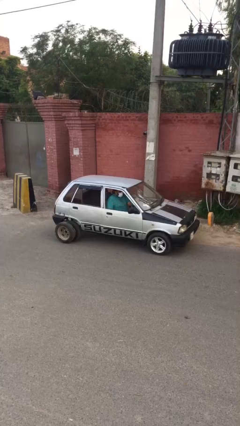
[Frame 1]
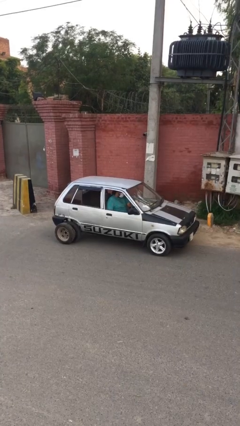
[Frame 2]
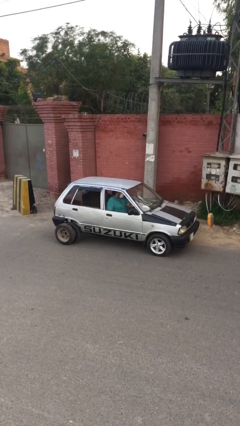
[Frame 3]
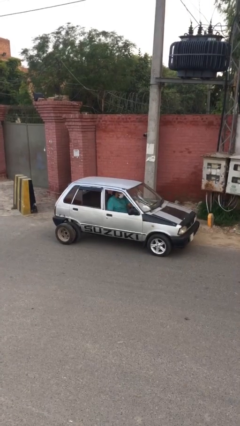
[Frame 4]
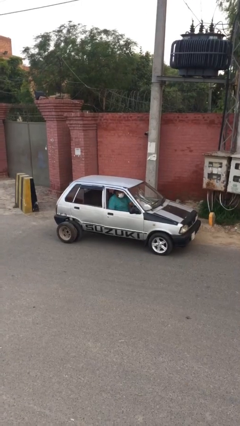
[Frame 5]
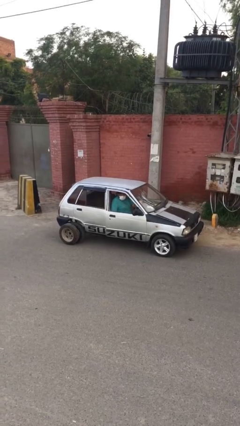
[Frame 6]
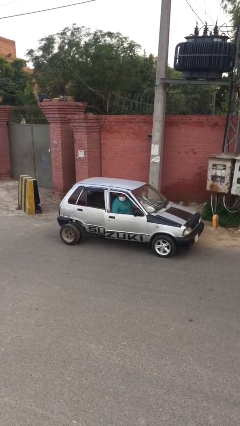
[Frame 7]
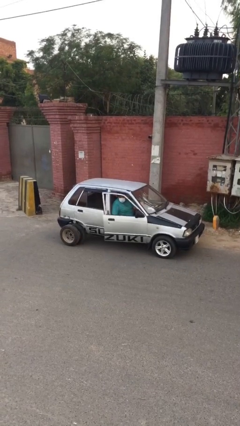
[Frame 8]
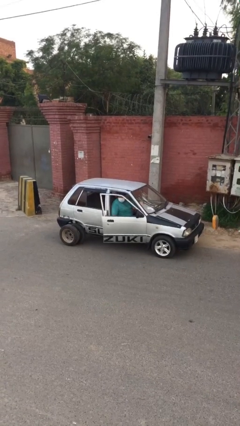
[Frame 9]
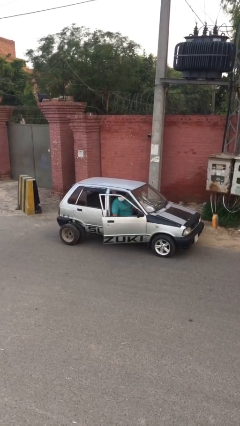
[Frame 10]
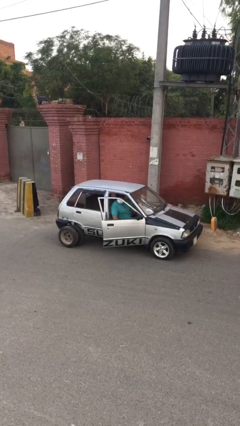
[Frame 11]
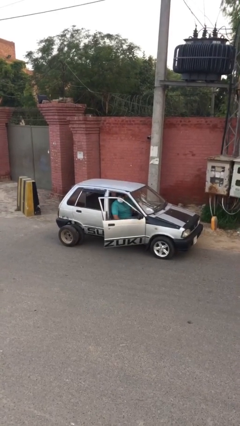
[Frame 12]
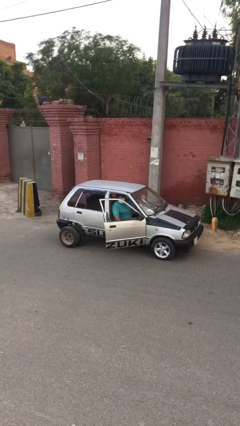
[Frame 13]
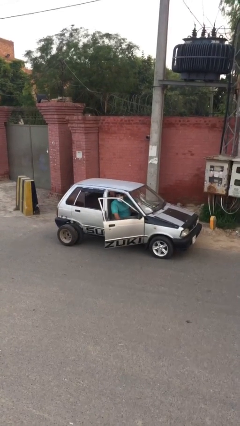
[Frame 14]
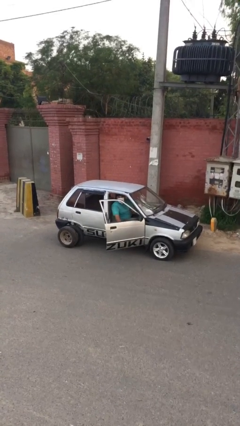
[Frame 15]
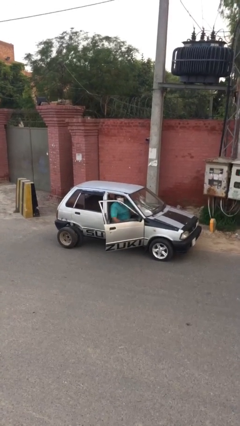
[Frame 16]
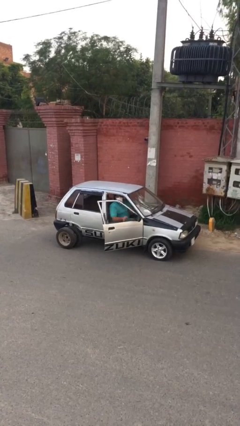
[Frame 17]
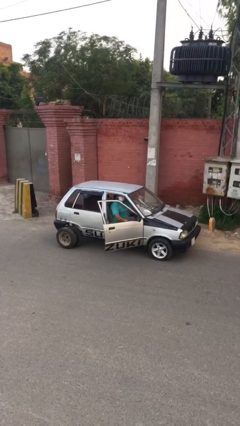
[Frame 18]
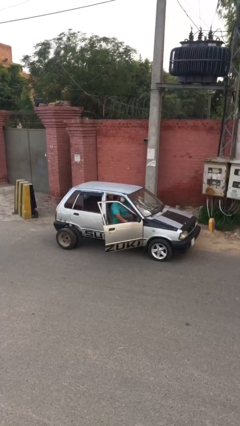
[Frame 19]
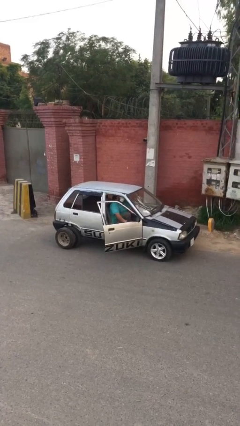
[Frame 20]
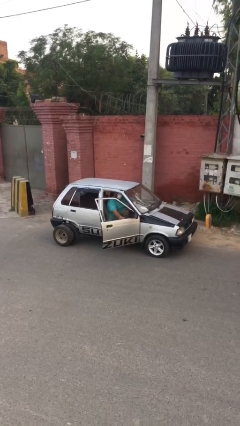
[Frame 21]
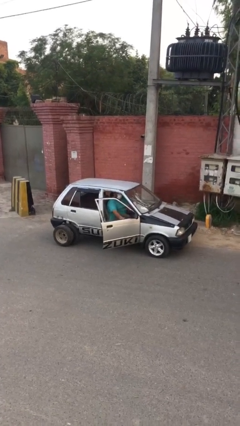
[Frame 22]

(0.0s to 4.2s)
person opens car door

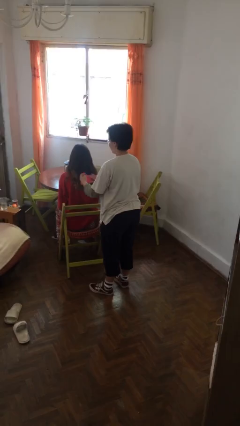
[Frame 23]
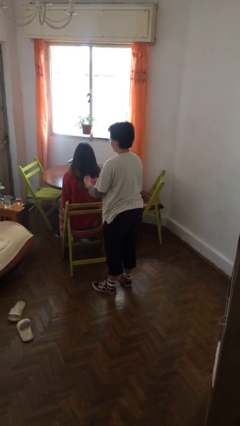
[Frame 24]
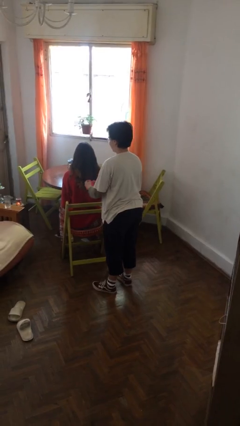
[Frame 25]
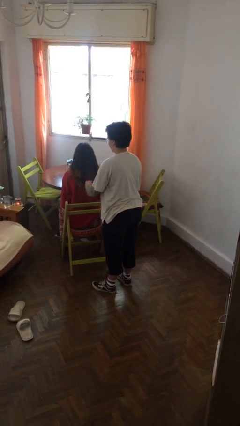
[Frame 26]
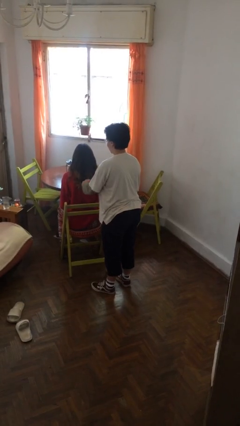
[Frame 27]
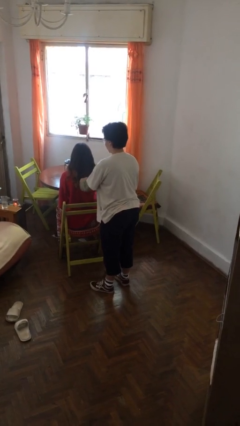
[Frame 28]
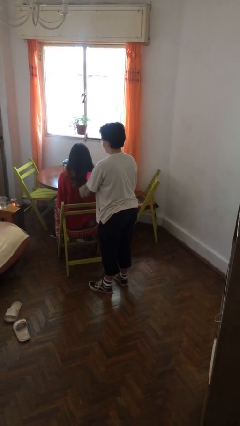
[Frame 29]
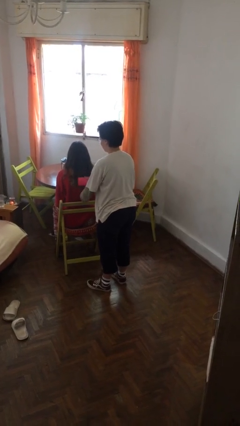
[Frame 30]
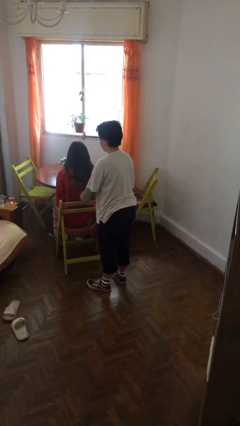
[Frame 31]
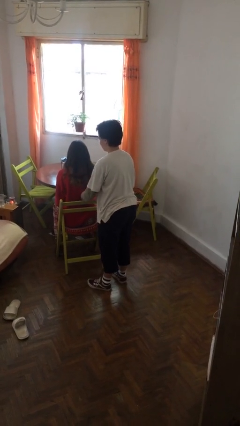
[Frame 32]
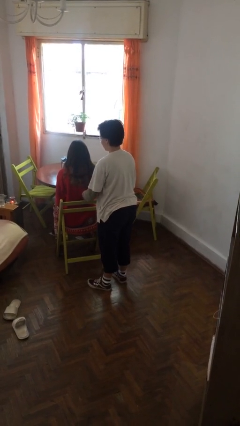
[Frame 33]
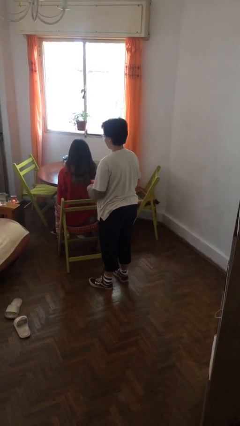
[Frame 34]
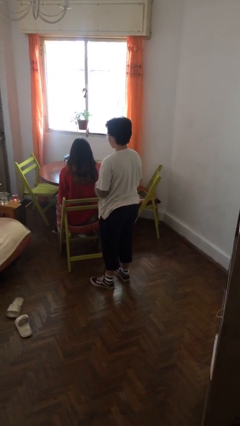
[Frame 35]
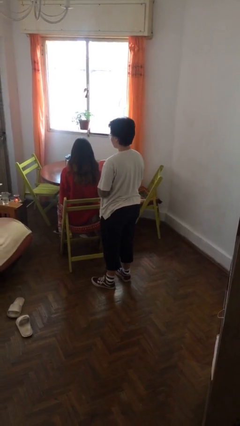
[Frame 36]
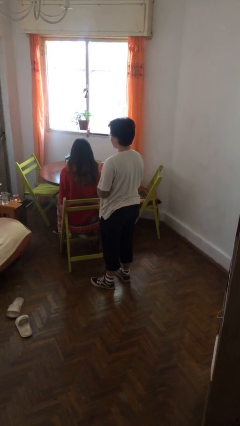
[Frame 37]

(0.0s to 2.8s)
person brushes hair of person

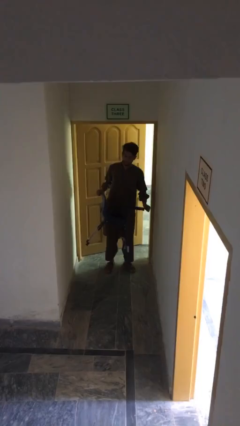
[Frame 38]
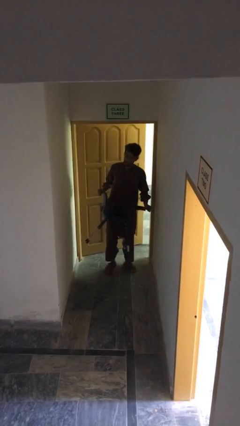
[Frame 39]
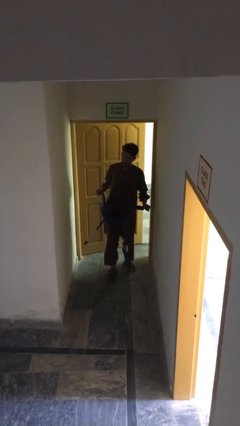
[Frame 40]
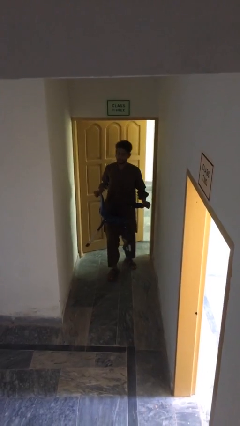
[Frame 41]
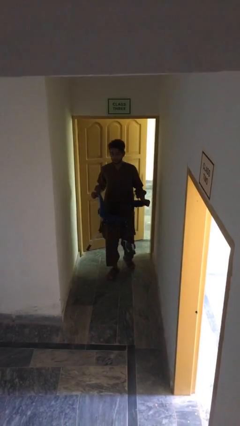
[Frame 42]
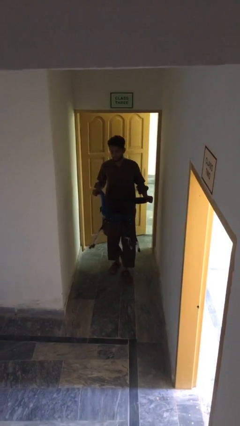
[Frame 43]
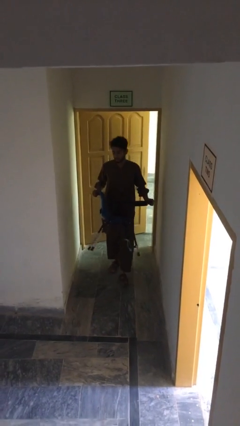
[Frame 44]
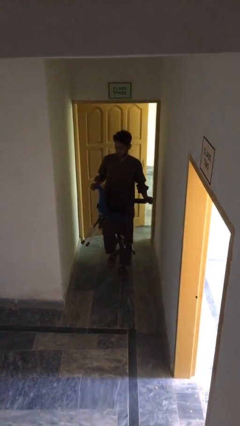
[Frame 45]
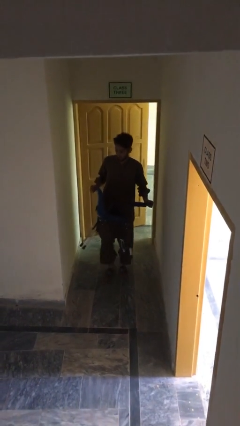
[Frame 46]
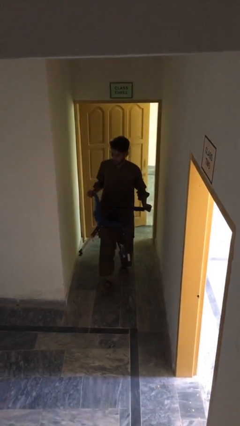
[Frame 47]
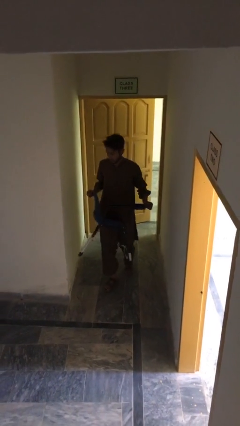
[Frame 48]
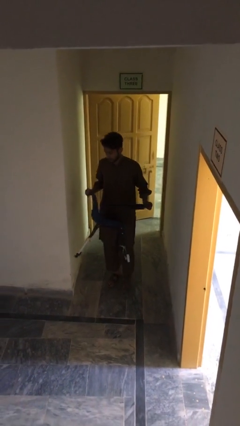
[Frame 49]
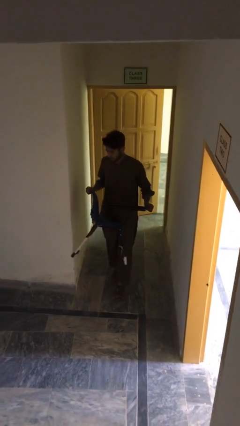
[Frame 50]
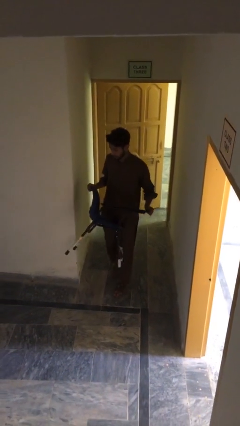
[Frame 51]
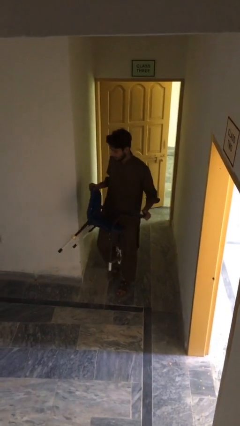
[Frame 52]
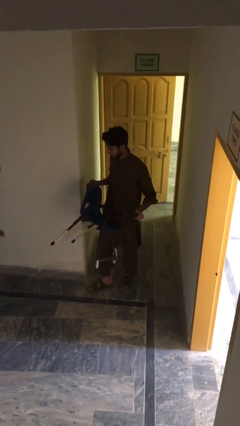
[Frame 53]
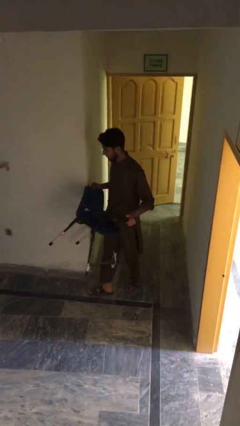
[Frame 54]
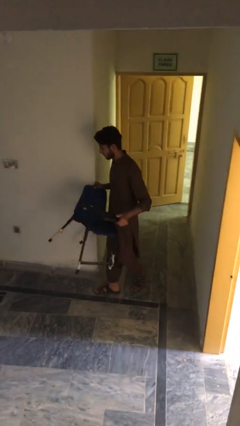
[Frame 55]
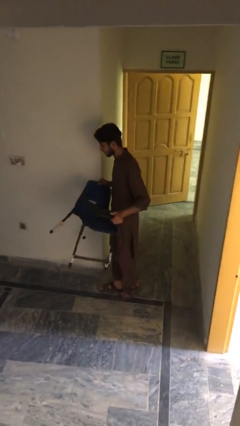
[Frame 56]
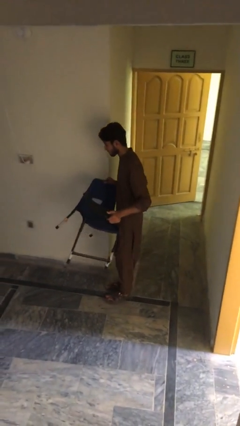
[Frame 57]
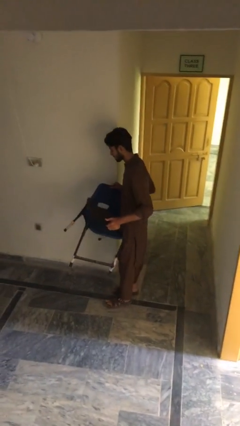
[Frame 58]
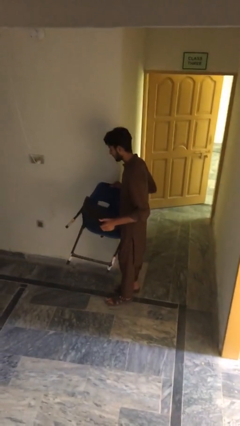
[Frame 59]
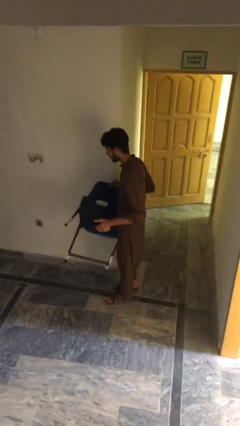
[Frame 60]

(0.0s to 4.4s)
person carries heavy object

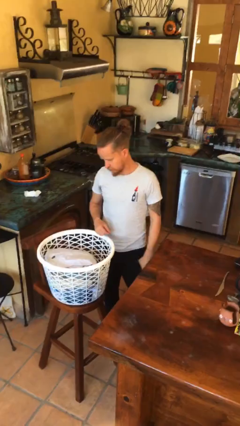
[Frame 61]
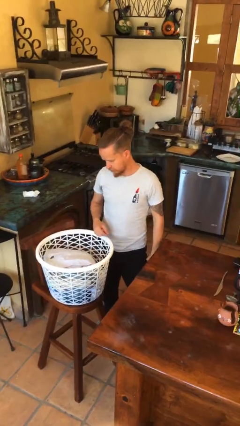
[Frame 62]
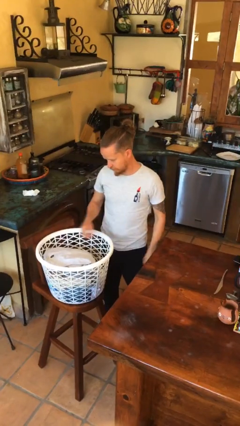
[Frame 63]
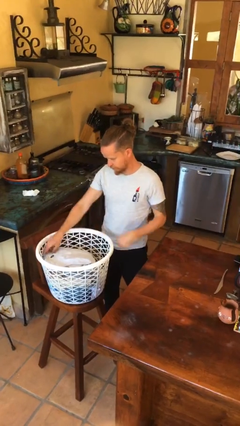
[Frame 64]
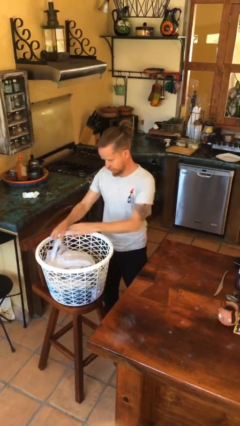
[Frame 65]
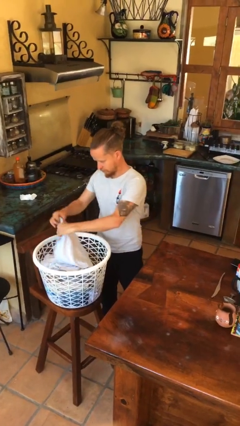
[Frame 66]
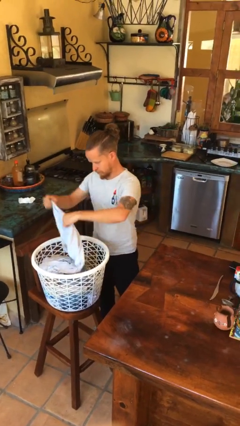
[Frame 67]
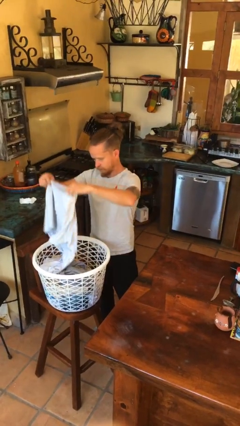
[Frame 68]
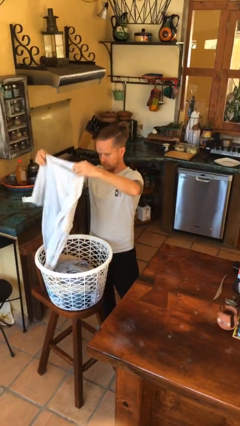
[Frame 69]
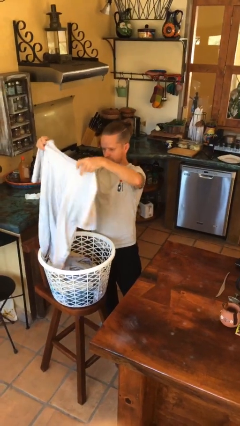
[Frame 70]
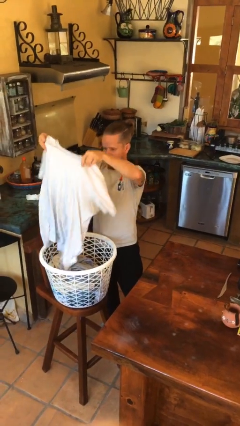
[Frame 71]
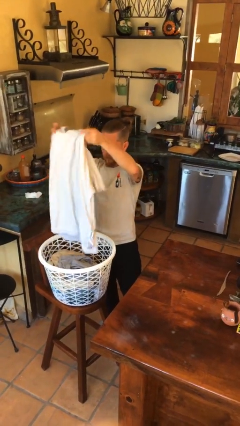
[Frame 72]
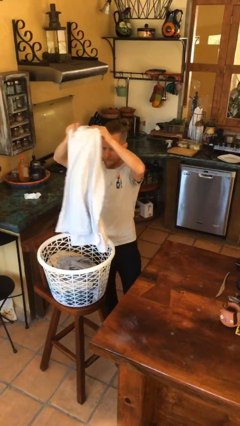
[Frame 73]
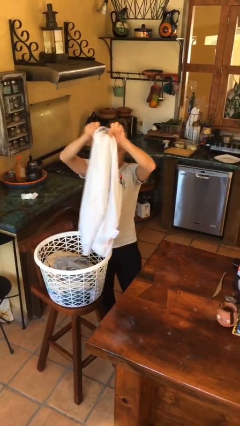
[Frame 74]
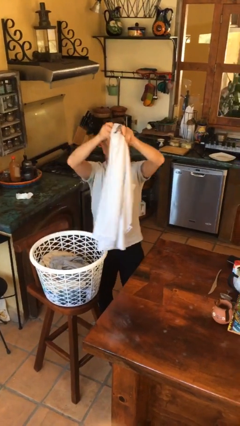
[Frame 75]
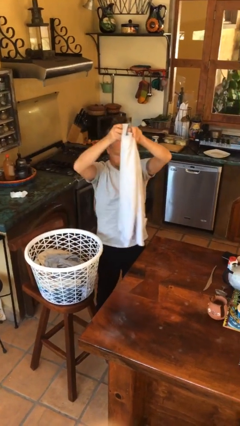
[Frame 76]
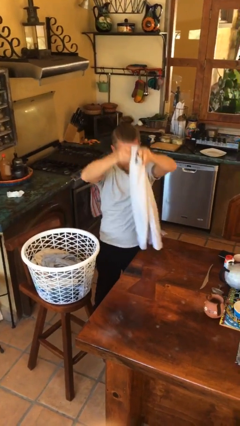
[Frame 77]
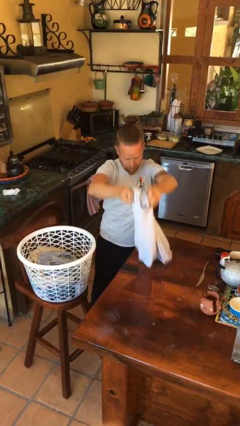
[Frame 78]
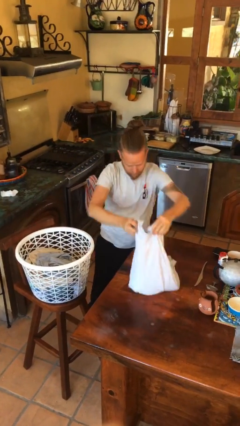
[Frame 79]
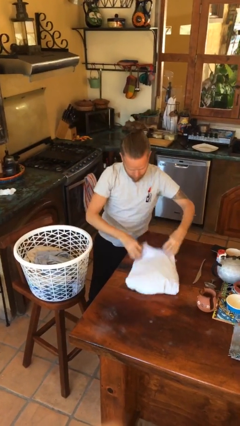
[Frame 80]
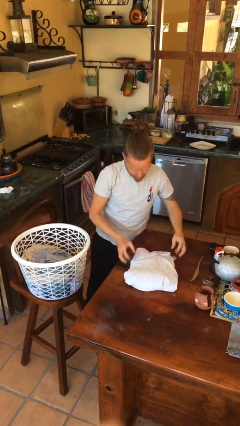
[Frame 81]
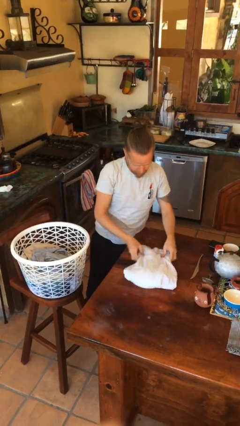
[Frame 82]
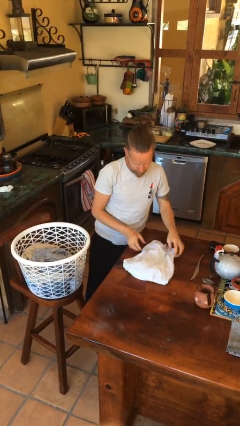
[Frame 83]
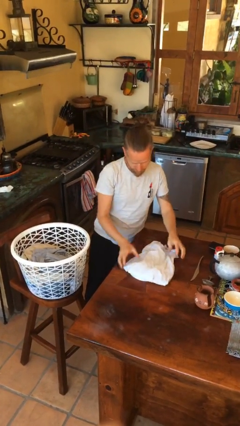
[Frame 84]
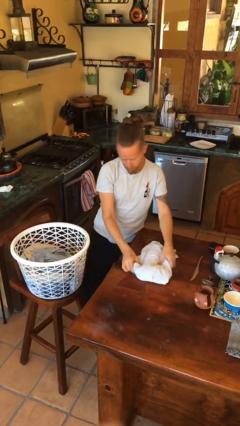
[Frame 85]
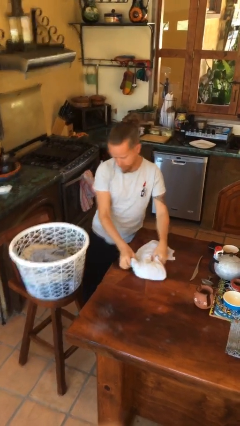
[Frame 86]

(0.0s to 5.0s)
person folds shirt

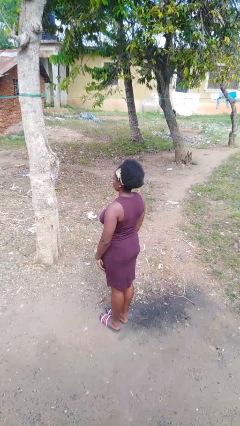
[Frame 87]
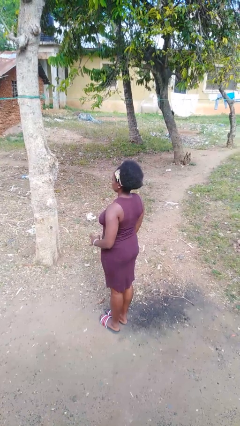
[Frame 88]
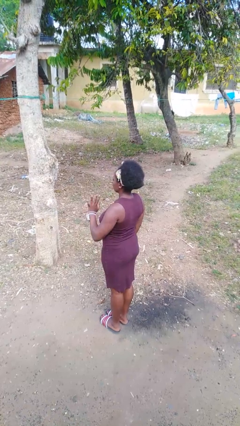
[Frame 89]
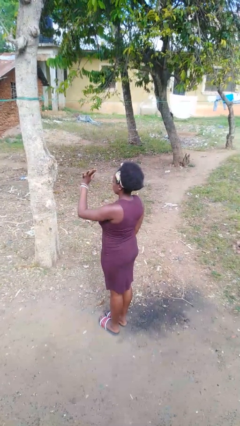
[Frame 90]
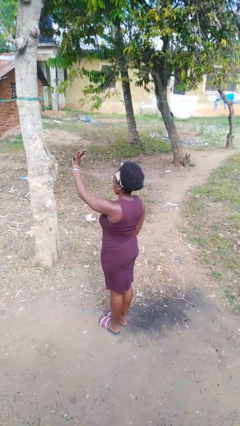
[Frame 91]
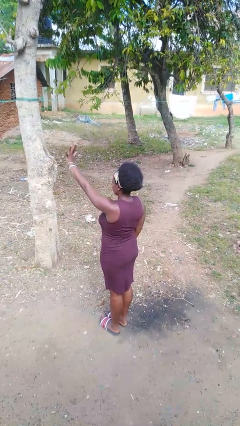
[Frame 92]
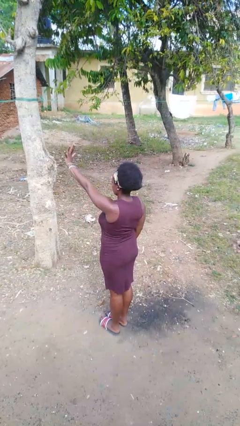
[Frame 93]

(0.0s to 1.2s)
person gestures number five
